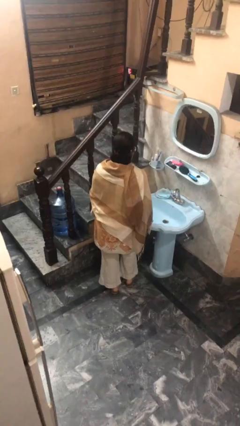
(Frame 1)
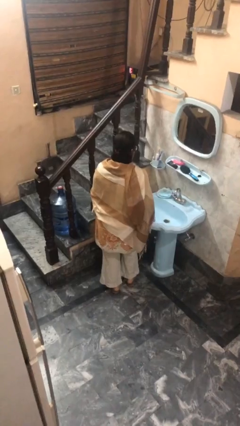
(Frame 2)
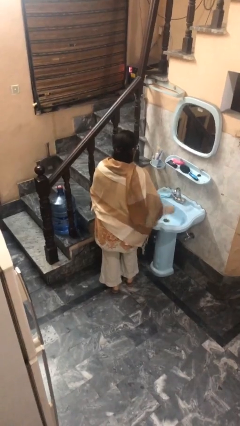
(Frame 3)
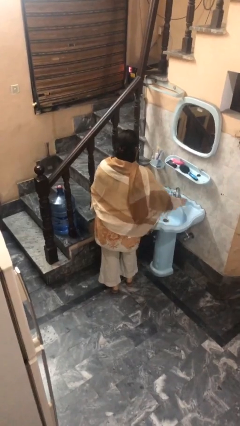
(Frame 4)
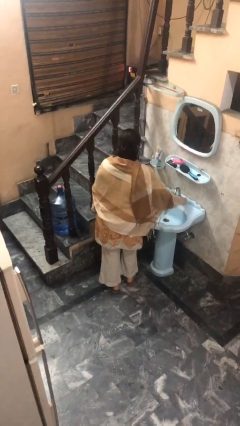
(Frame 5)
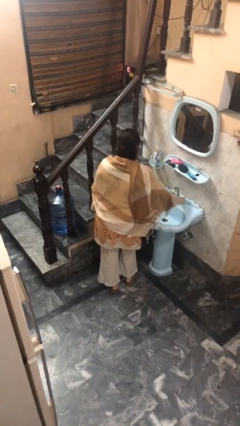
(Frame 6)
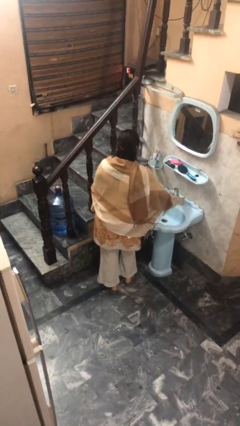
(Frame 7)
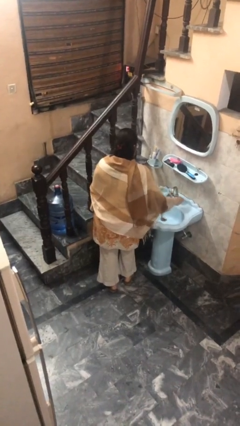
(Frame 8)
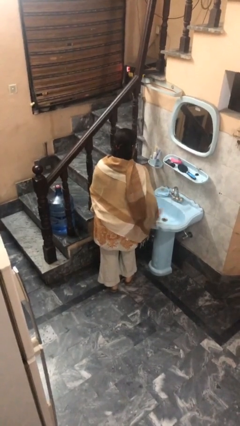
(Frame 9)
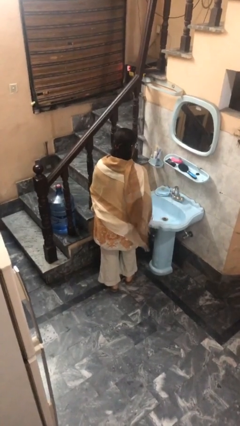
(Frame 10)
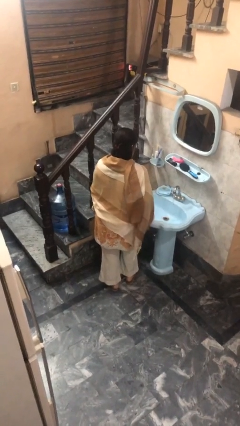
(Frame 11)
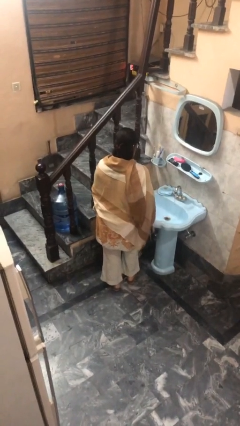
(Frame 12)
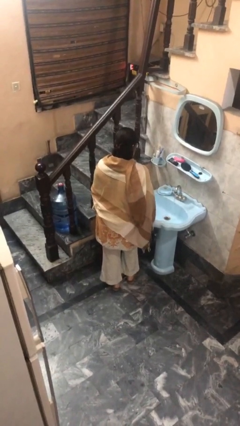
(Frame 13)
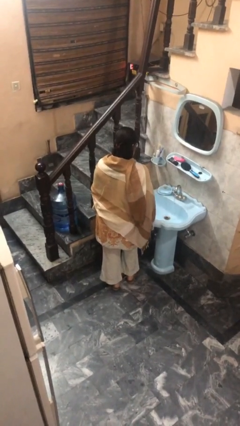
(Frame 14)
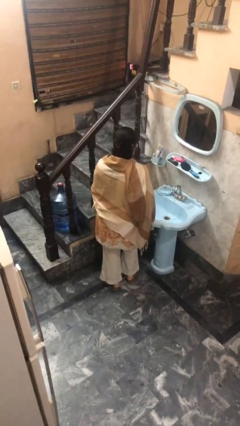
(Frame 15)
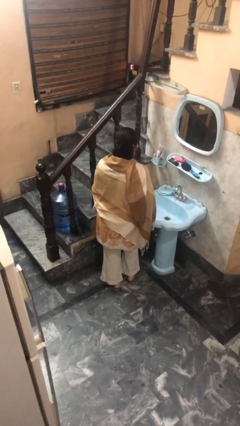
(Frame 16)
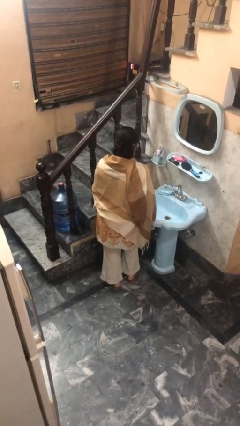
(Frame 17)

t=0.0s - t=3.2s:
person turns on faucet

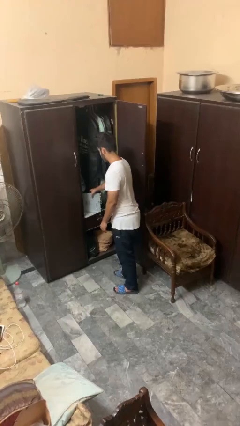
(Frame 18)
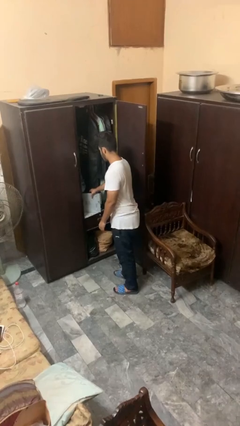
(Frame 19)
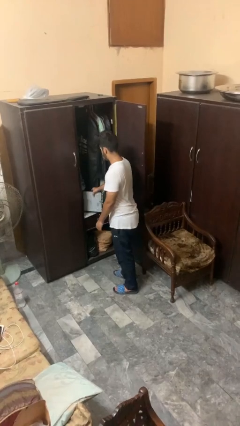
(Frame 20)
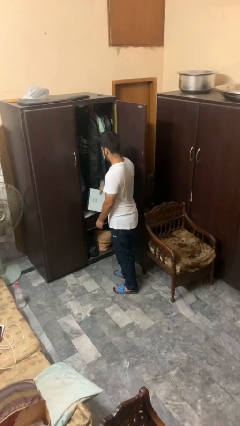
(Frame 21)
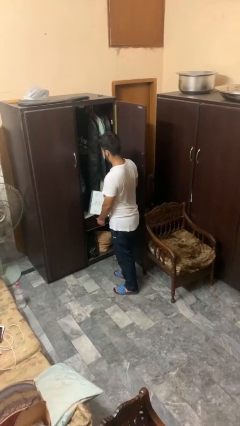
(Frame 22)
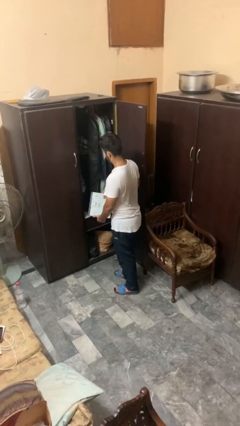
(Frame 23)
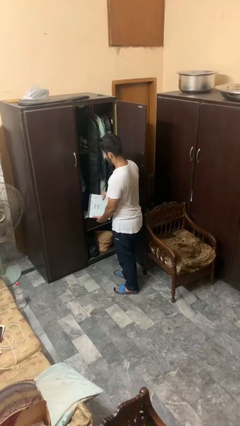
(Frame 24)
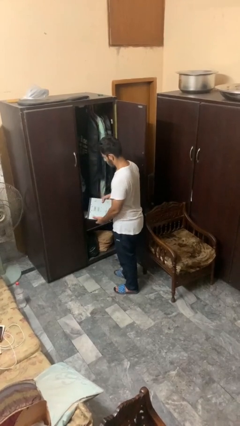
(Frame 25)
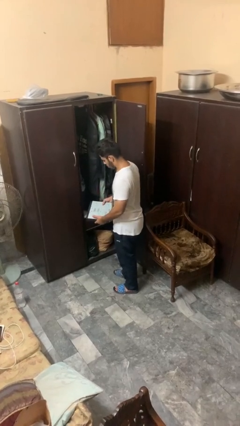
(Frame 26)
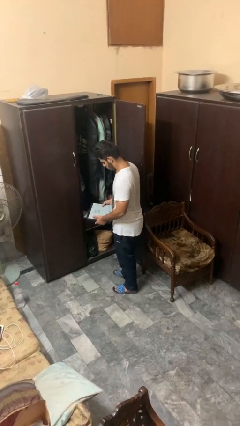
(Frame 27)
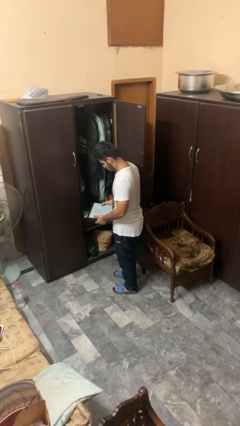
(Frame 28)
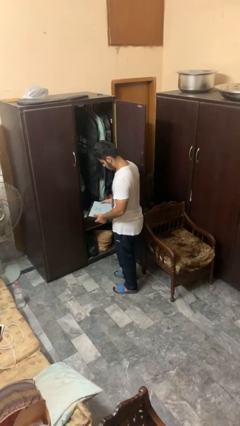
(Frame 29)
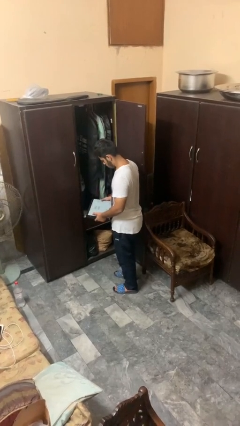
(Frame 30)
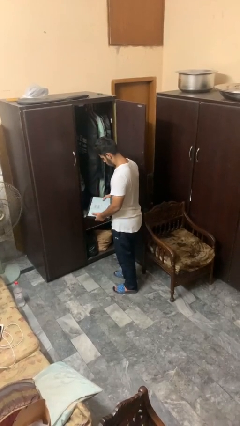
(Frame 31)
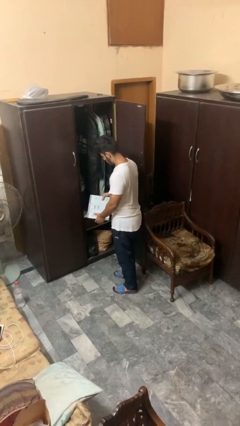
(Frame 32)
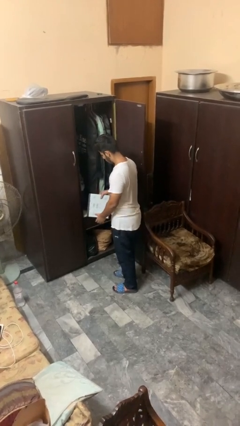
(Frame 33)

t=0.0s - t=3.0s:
person picks up object from countertop

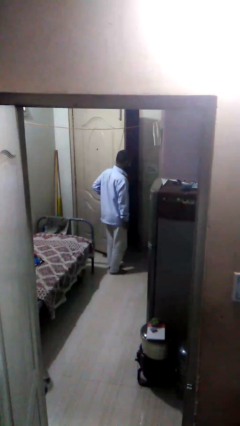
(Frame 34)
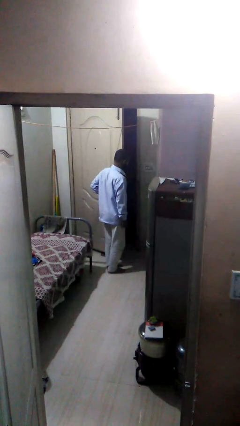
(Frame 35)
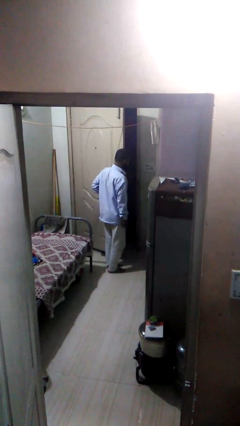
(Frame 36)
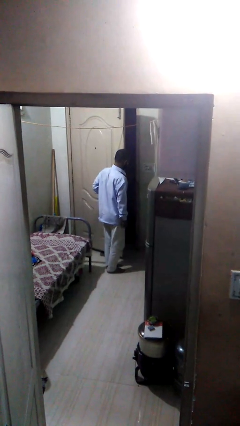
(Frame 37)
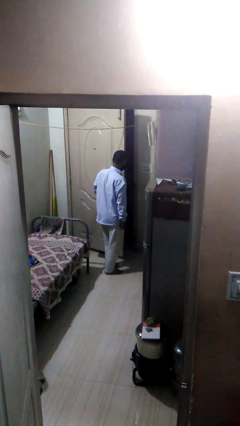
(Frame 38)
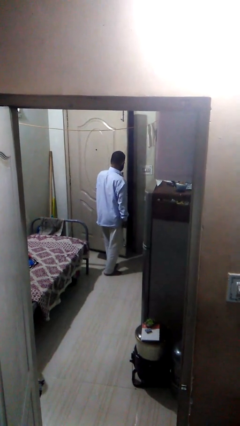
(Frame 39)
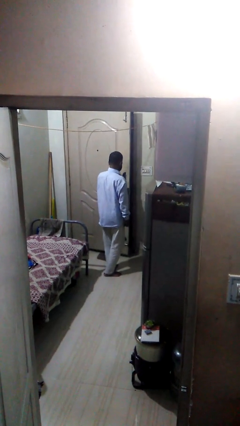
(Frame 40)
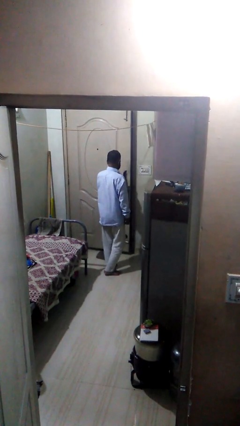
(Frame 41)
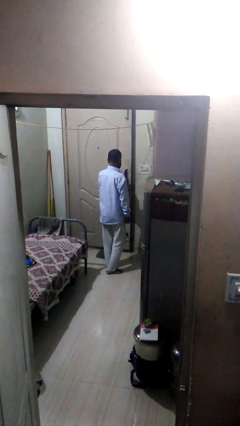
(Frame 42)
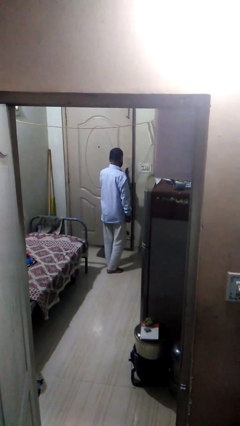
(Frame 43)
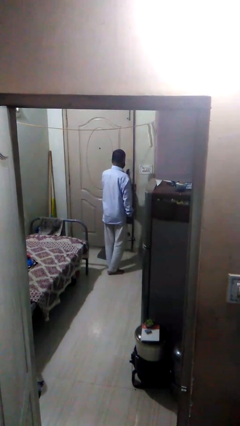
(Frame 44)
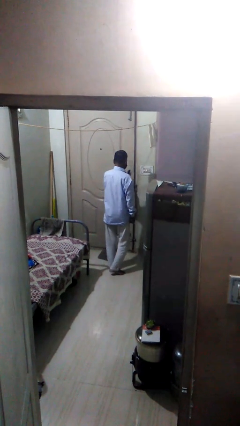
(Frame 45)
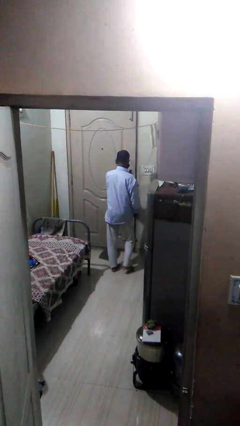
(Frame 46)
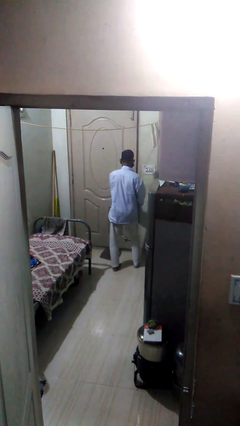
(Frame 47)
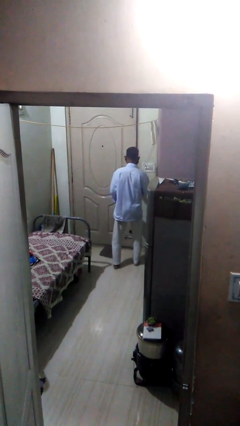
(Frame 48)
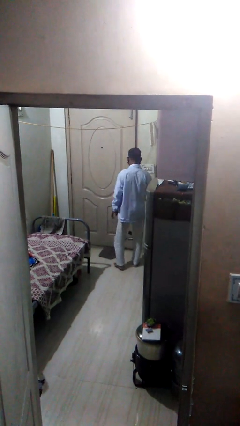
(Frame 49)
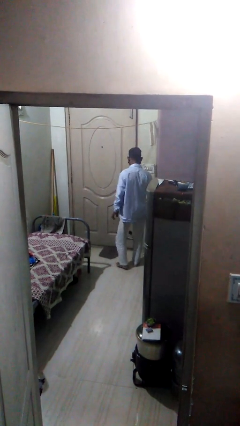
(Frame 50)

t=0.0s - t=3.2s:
person closes facility door

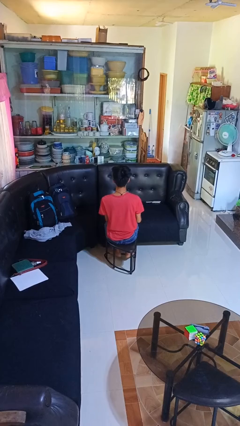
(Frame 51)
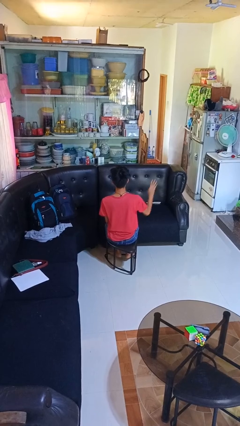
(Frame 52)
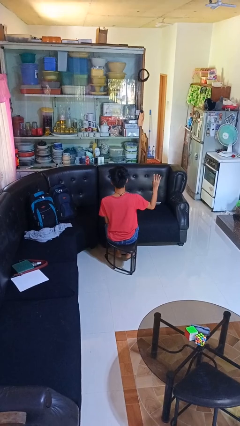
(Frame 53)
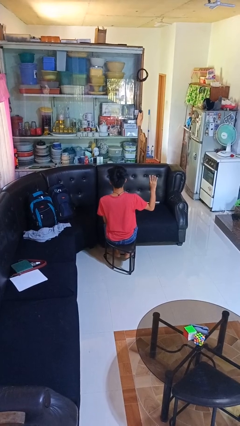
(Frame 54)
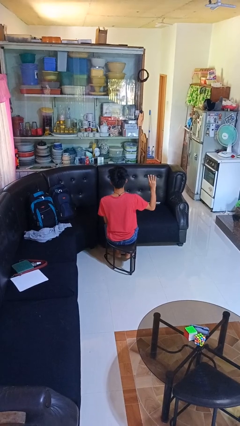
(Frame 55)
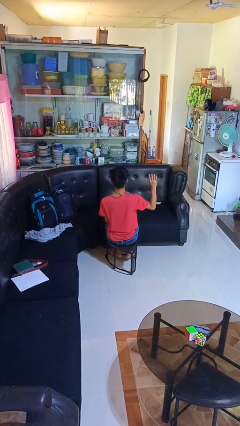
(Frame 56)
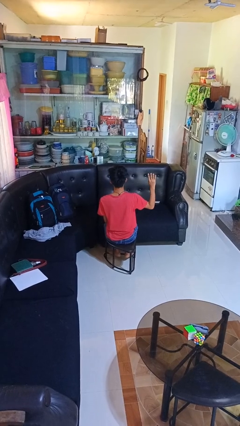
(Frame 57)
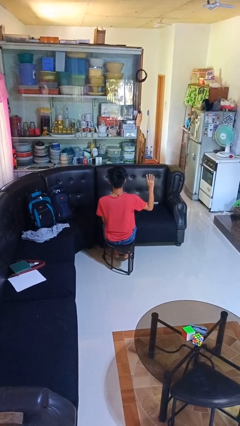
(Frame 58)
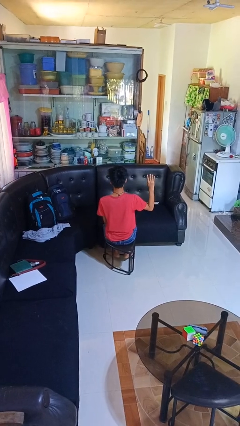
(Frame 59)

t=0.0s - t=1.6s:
person gestures number four

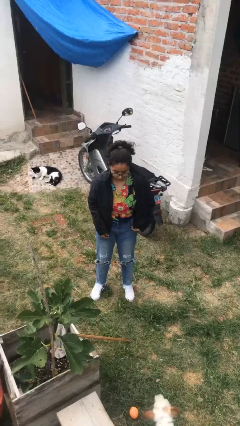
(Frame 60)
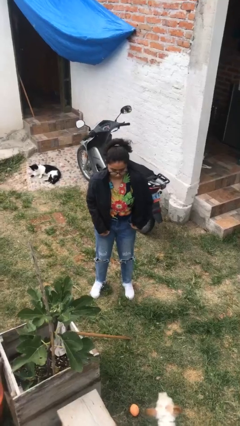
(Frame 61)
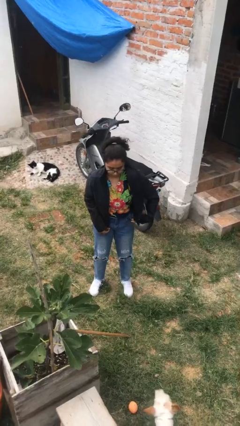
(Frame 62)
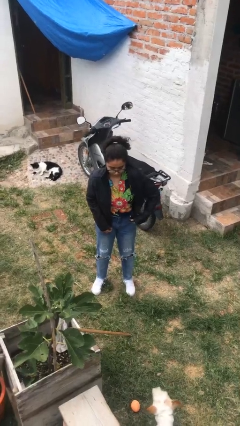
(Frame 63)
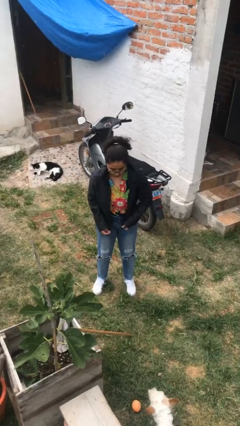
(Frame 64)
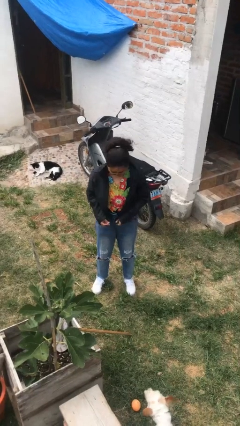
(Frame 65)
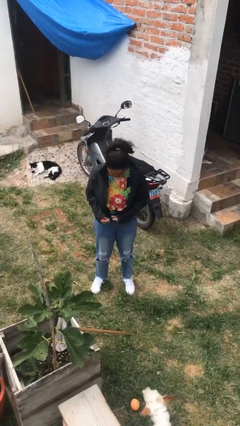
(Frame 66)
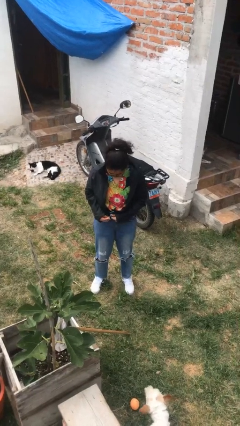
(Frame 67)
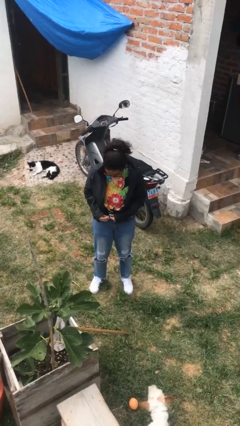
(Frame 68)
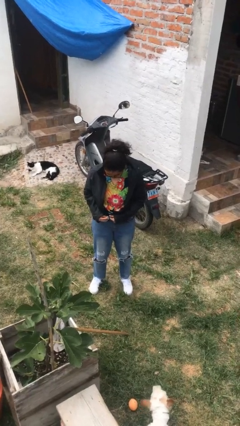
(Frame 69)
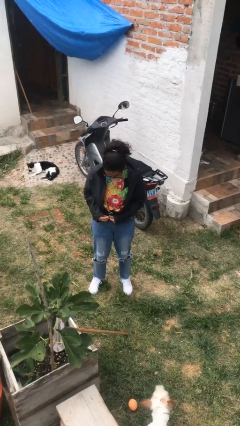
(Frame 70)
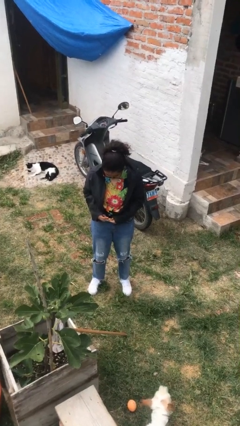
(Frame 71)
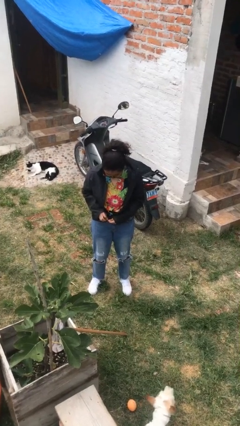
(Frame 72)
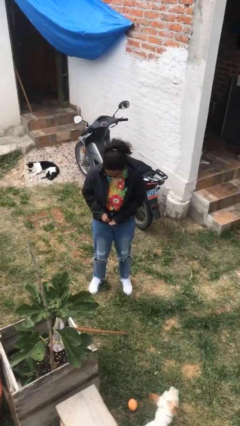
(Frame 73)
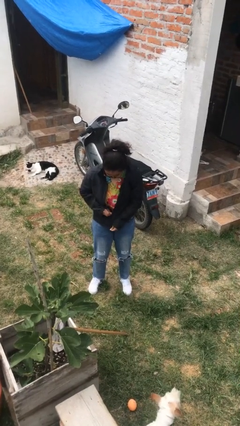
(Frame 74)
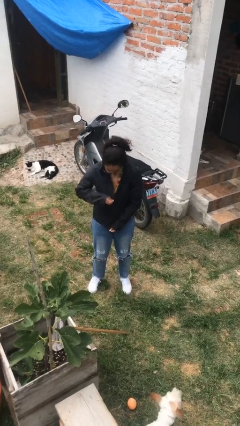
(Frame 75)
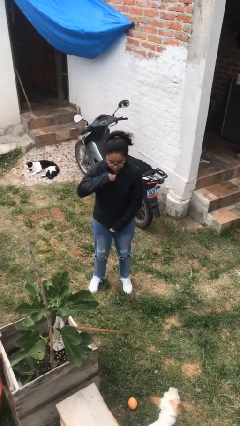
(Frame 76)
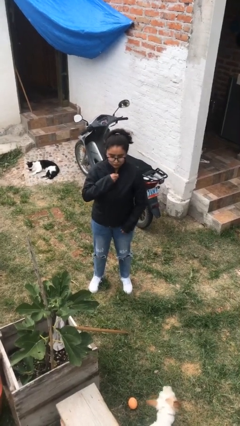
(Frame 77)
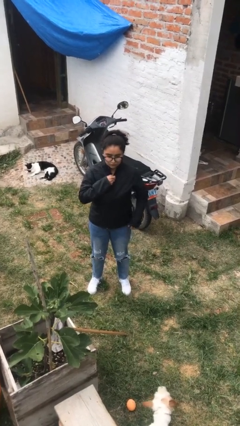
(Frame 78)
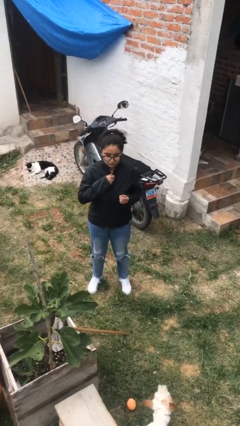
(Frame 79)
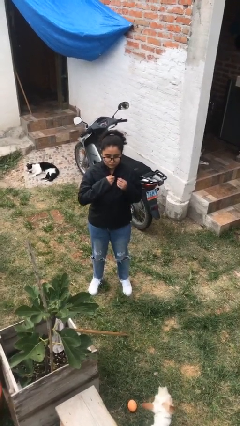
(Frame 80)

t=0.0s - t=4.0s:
person zips up jacket

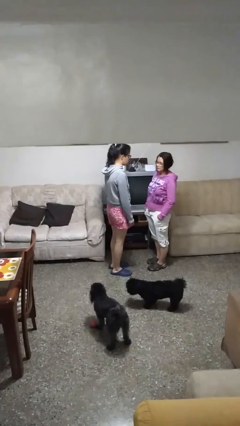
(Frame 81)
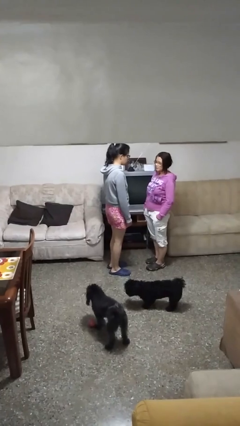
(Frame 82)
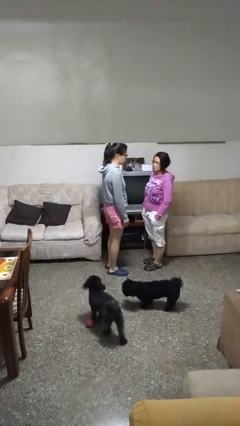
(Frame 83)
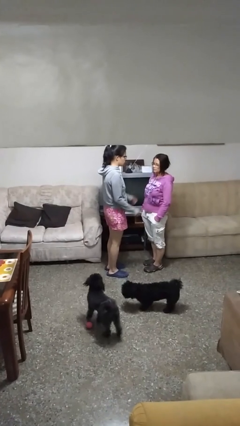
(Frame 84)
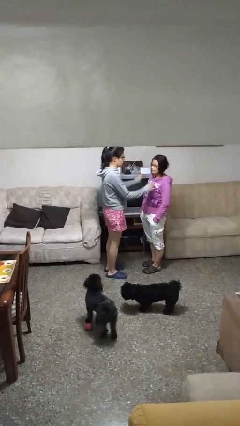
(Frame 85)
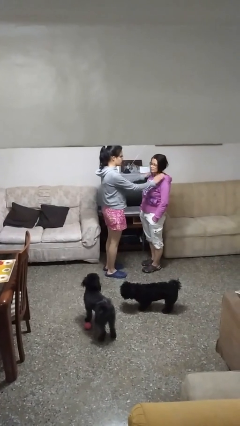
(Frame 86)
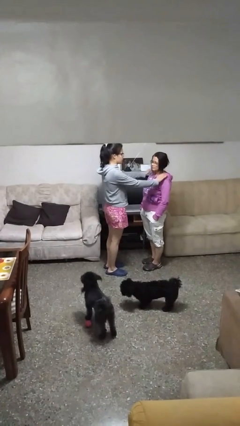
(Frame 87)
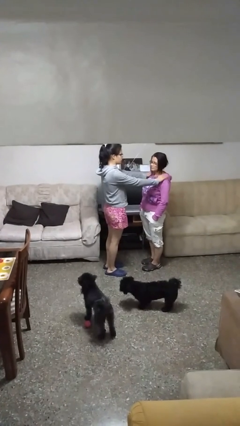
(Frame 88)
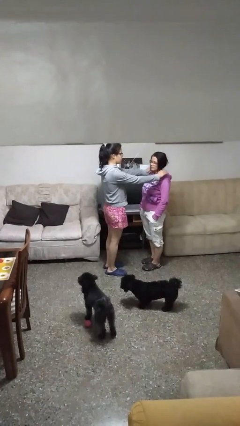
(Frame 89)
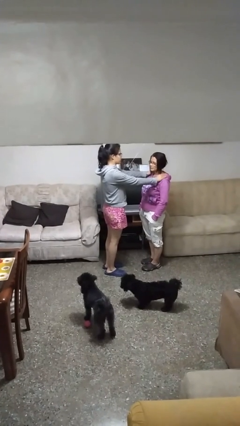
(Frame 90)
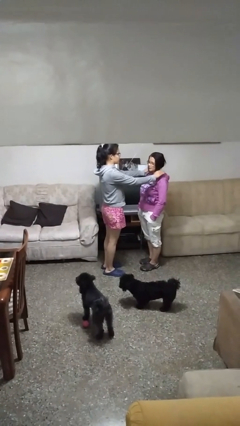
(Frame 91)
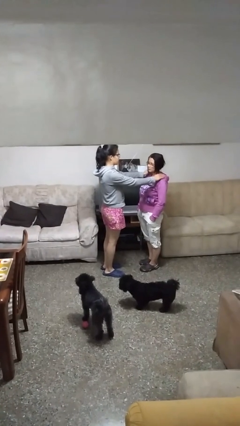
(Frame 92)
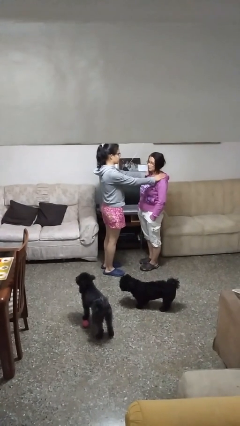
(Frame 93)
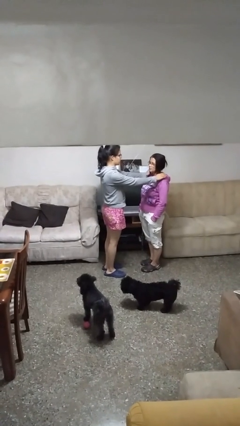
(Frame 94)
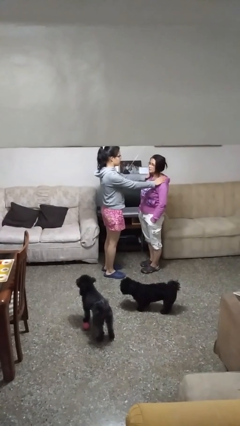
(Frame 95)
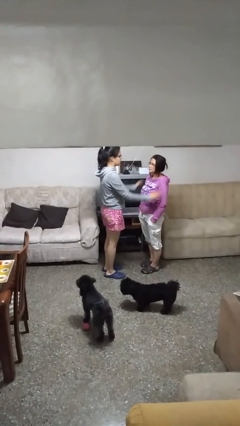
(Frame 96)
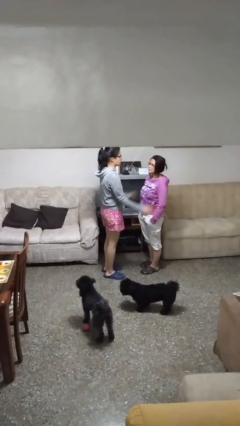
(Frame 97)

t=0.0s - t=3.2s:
person pounds shoulders of person
